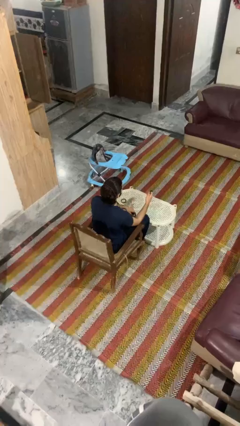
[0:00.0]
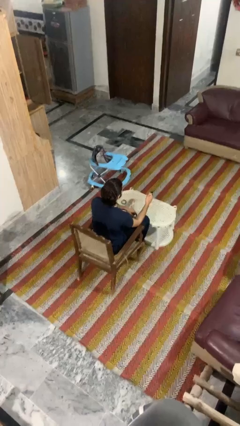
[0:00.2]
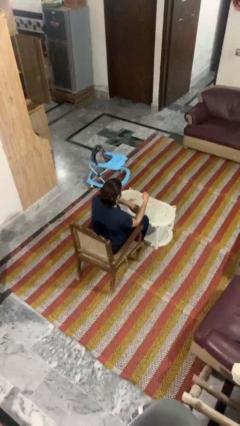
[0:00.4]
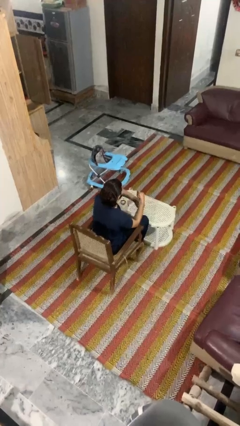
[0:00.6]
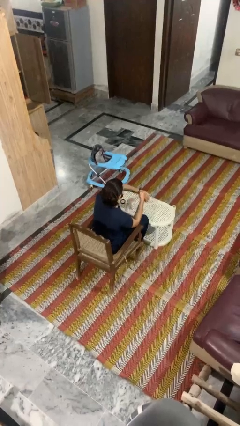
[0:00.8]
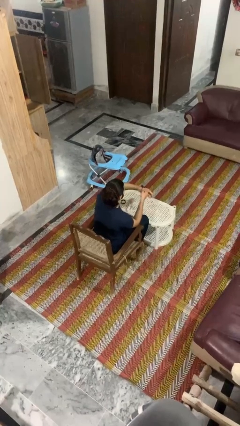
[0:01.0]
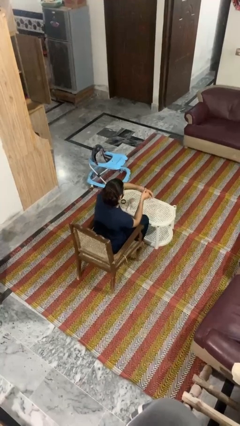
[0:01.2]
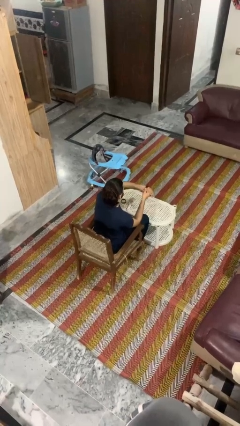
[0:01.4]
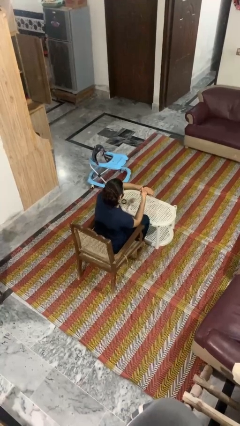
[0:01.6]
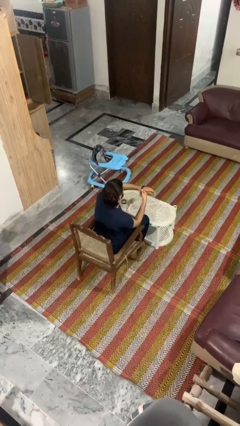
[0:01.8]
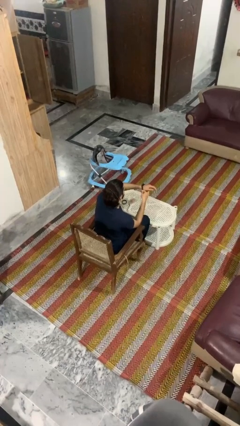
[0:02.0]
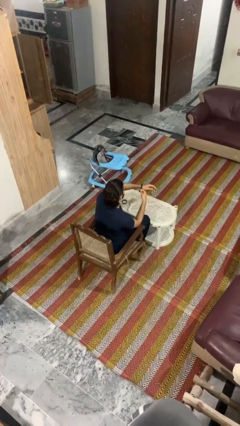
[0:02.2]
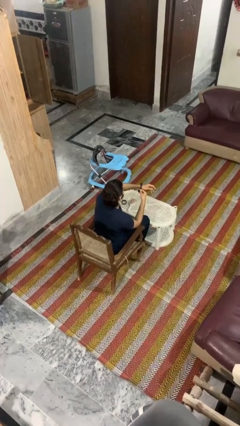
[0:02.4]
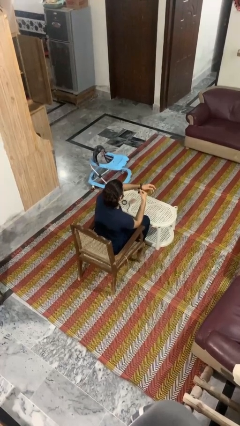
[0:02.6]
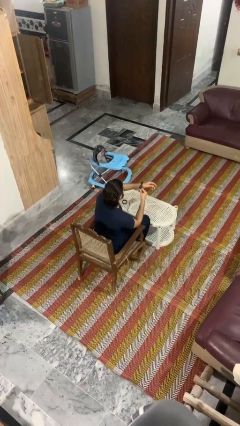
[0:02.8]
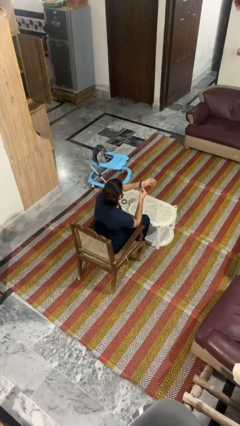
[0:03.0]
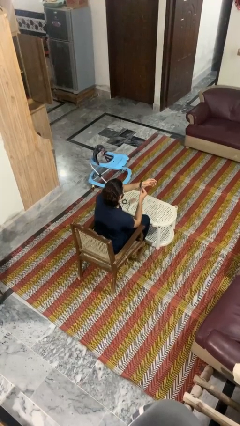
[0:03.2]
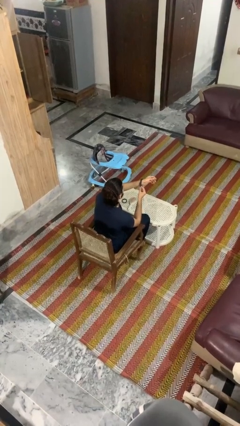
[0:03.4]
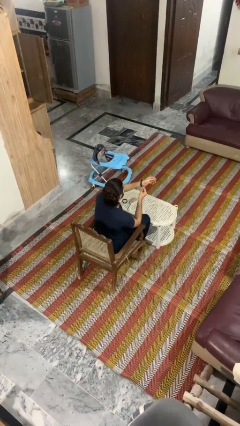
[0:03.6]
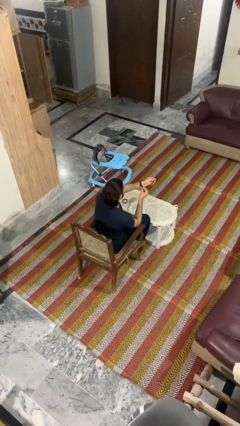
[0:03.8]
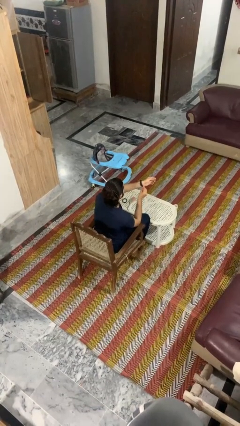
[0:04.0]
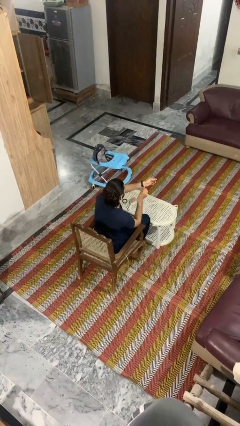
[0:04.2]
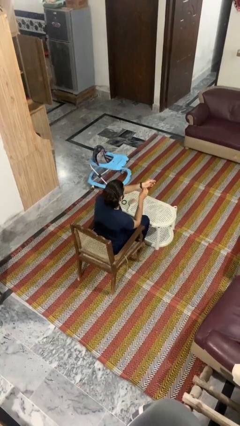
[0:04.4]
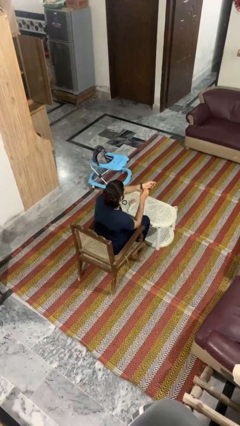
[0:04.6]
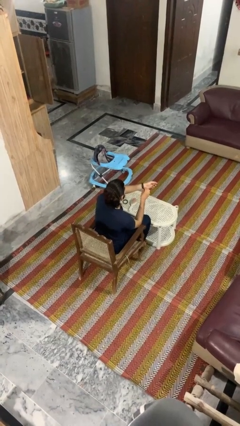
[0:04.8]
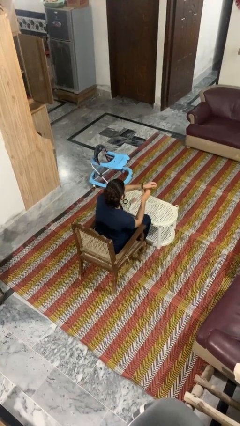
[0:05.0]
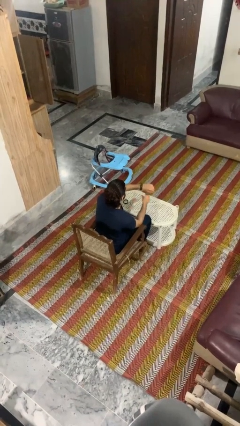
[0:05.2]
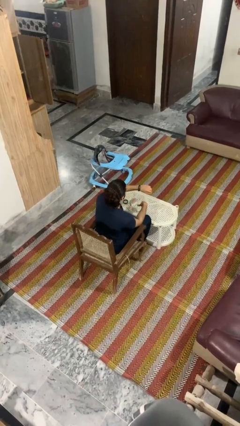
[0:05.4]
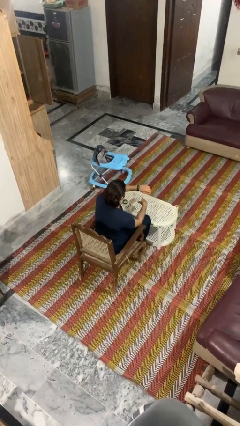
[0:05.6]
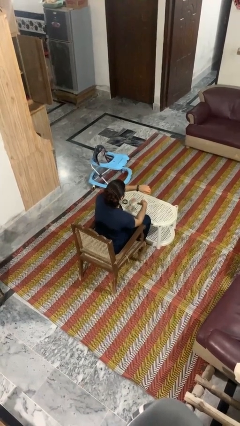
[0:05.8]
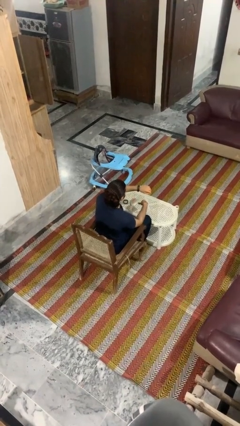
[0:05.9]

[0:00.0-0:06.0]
person puts on wristwatch

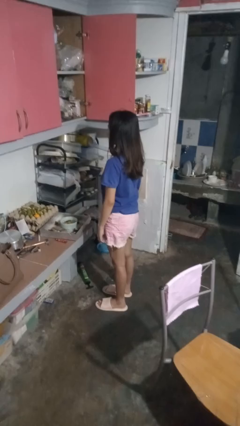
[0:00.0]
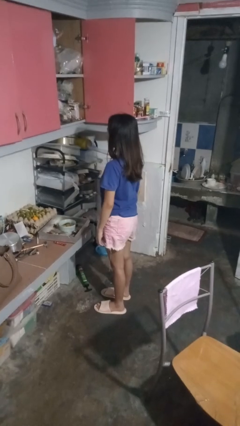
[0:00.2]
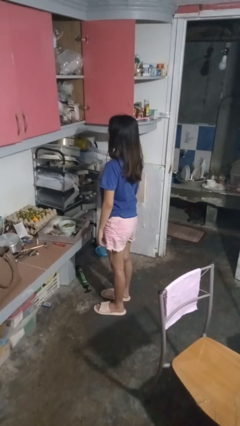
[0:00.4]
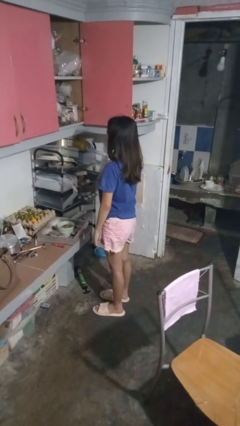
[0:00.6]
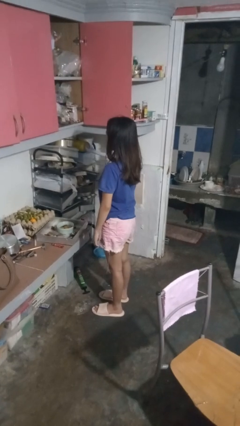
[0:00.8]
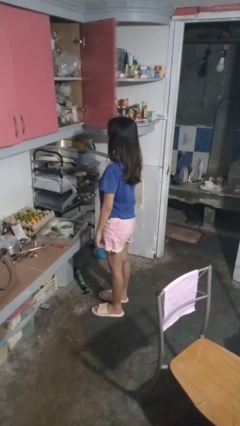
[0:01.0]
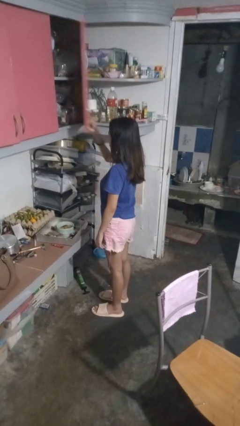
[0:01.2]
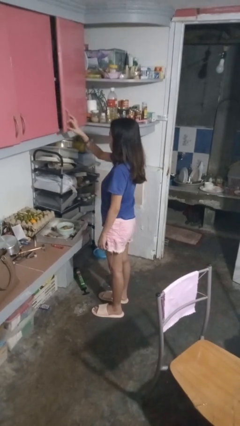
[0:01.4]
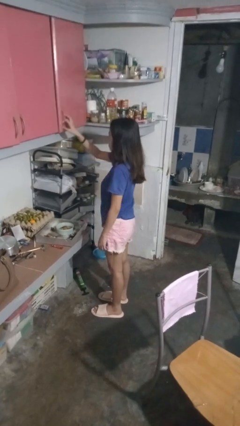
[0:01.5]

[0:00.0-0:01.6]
person closes cabinet

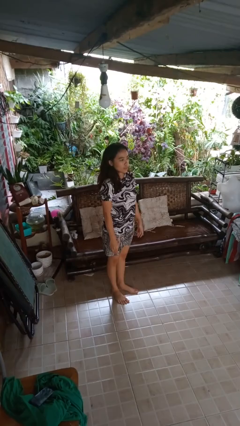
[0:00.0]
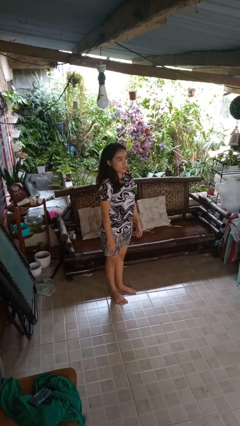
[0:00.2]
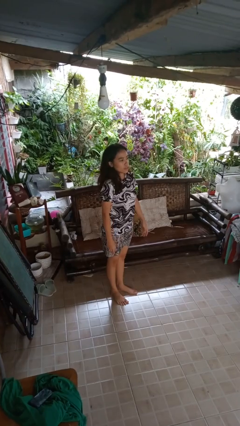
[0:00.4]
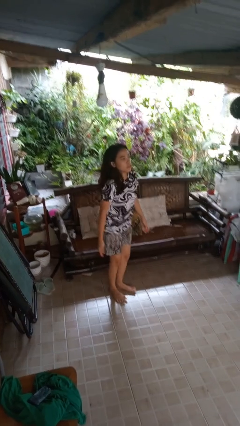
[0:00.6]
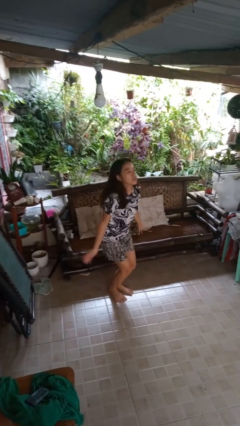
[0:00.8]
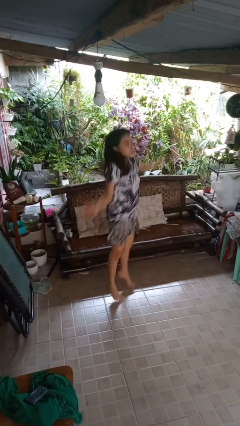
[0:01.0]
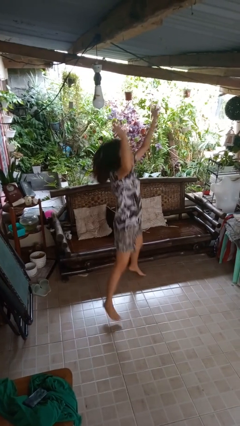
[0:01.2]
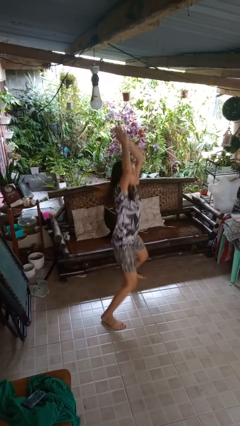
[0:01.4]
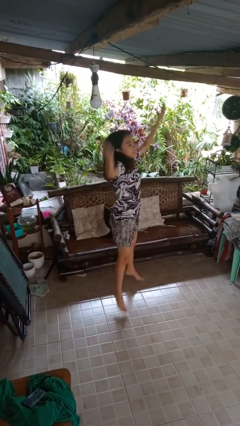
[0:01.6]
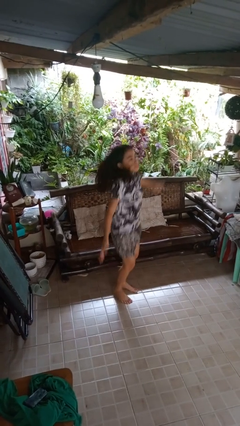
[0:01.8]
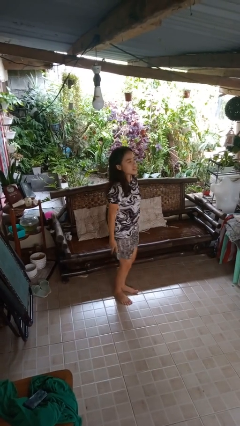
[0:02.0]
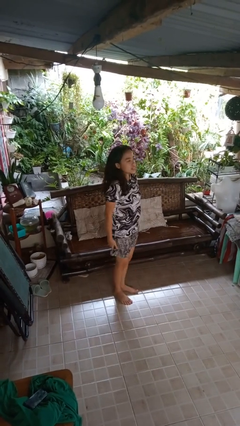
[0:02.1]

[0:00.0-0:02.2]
person exercises with jumping jacks

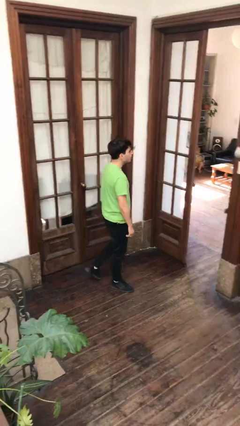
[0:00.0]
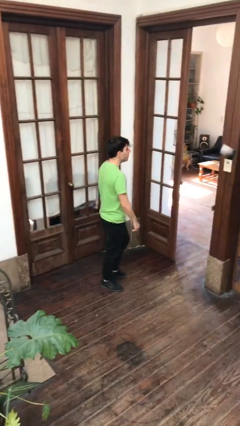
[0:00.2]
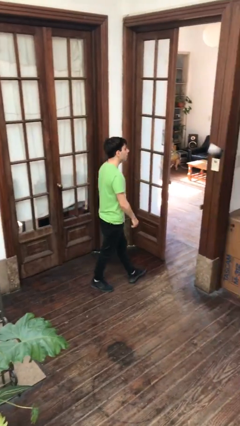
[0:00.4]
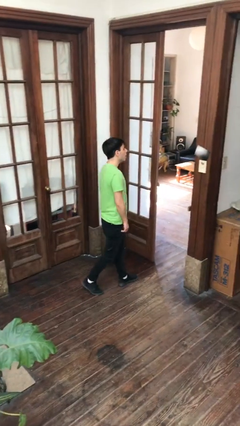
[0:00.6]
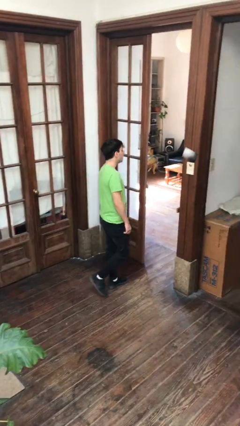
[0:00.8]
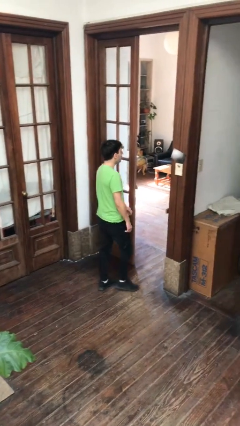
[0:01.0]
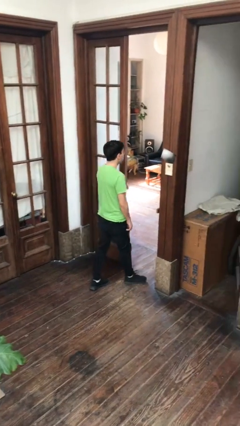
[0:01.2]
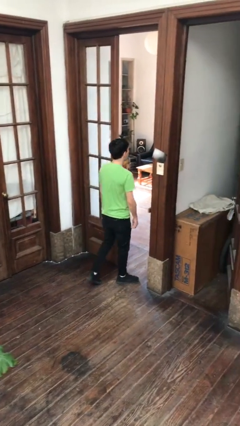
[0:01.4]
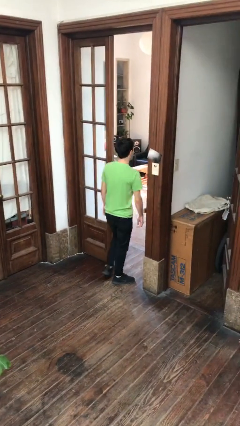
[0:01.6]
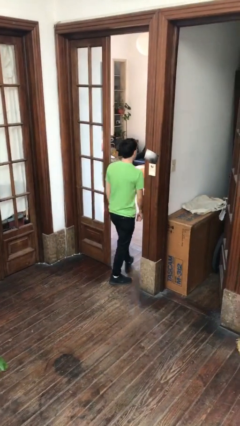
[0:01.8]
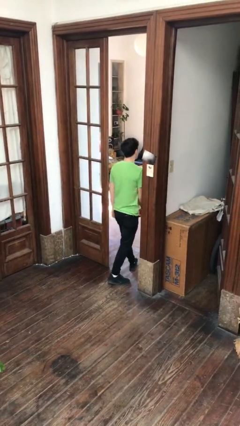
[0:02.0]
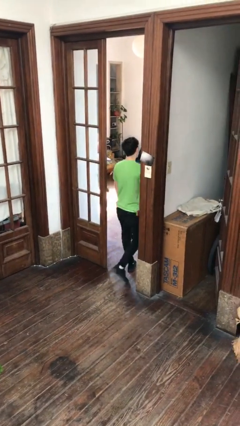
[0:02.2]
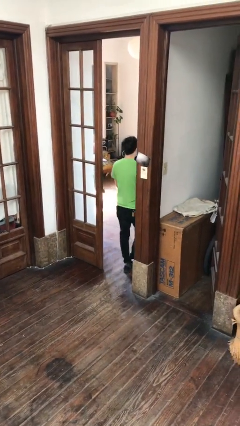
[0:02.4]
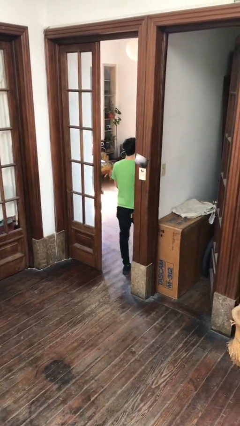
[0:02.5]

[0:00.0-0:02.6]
person exits scene through structure

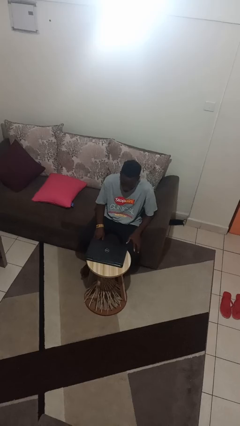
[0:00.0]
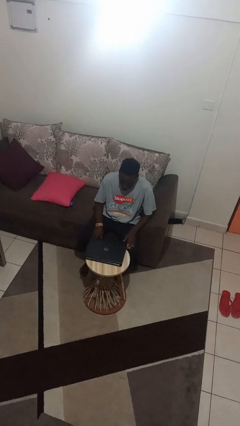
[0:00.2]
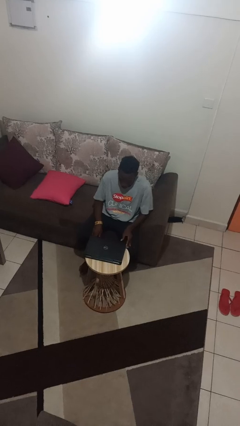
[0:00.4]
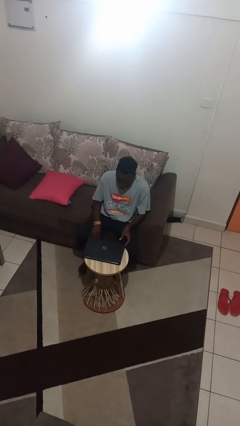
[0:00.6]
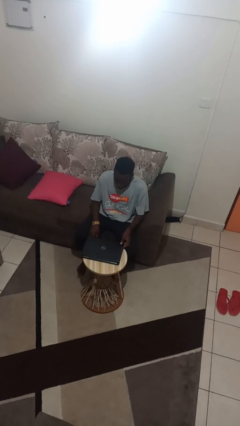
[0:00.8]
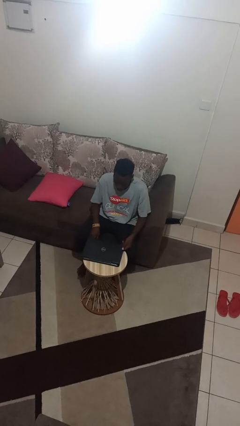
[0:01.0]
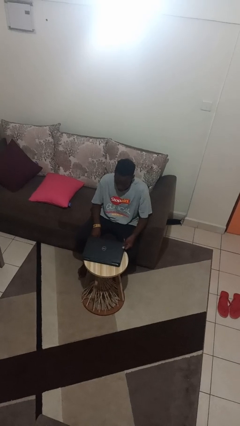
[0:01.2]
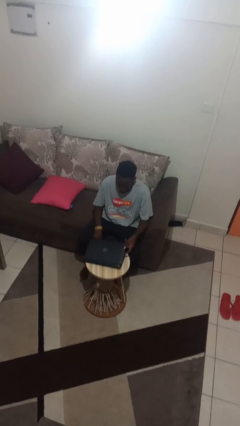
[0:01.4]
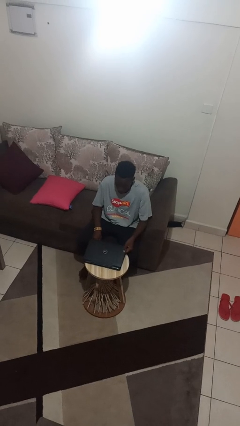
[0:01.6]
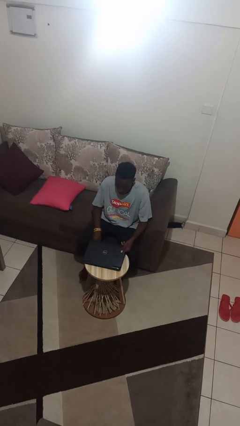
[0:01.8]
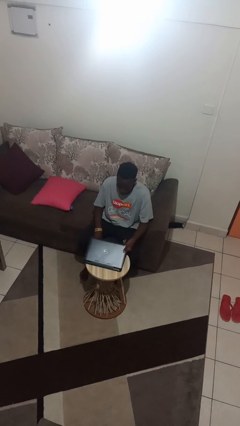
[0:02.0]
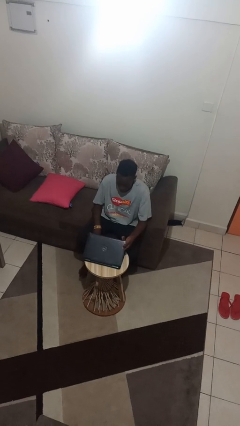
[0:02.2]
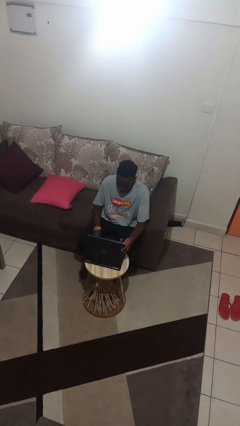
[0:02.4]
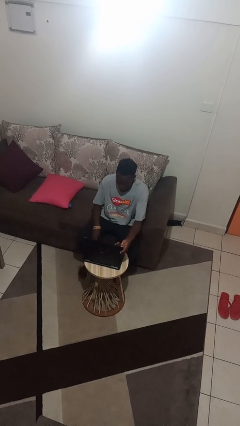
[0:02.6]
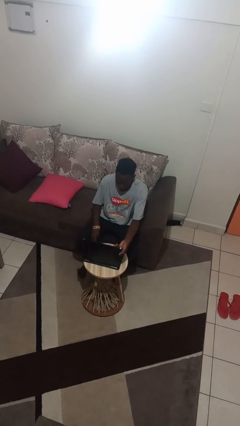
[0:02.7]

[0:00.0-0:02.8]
person opens laptop

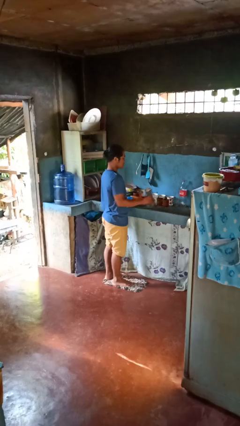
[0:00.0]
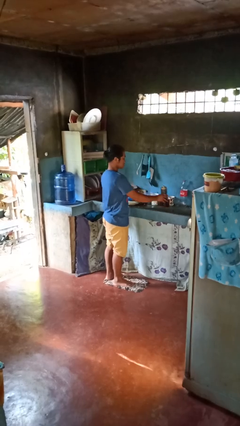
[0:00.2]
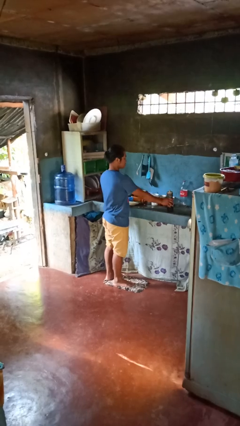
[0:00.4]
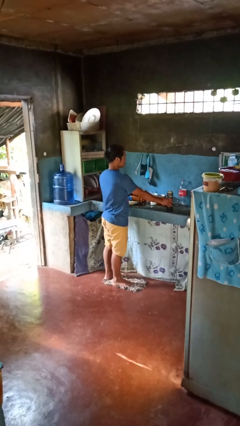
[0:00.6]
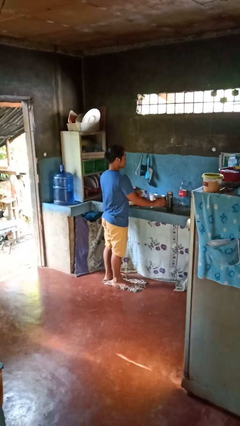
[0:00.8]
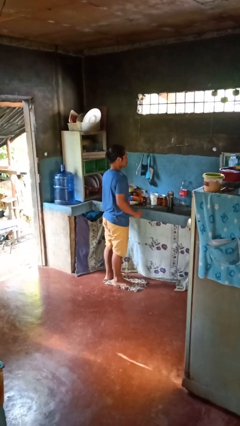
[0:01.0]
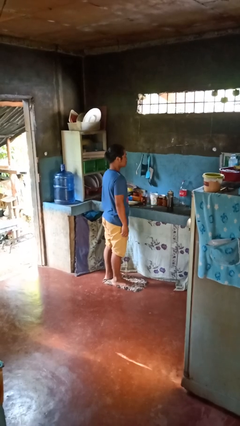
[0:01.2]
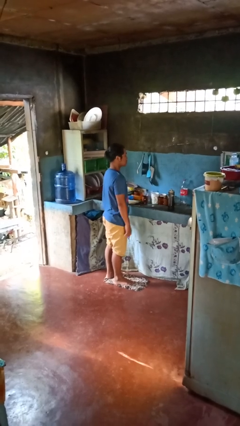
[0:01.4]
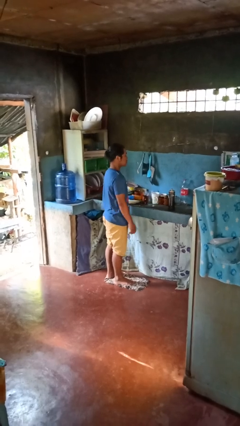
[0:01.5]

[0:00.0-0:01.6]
person puts down object on countertop

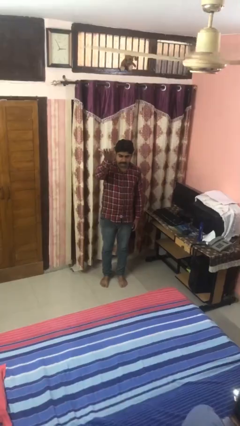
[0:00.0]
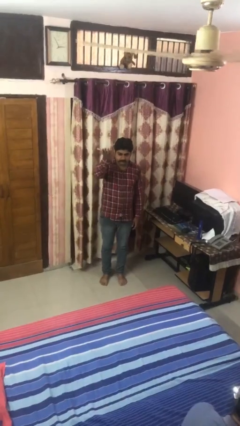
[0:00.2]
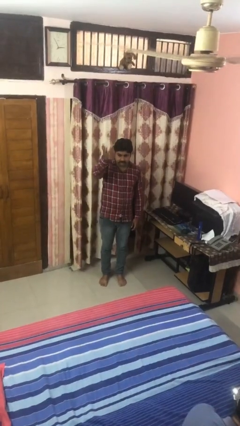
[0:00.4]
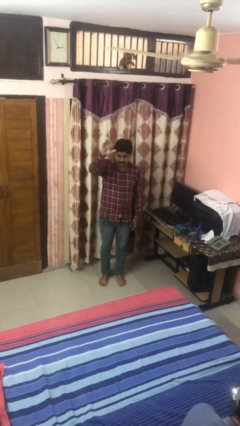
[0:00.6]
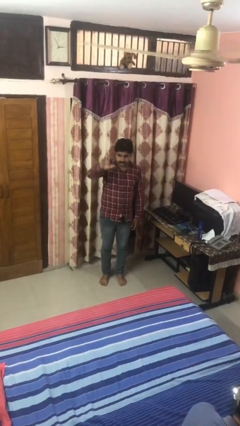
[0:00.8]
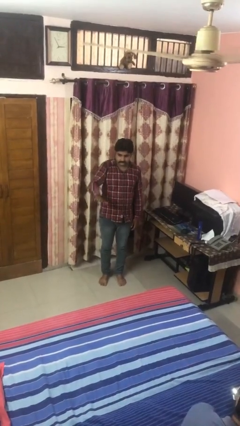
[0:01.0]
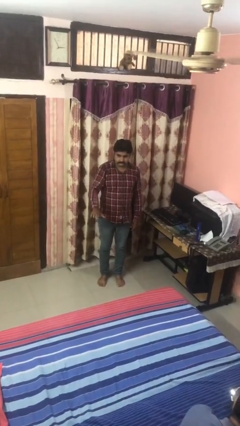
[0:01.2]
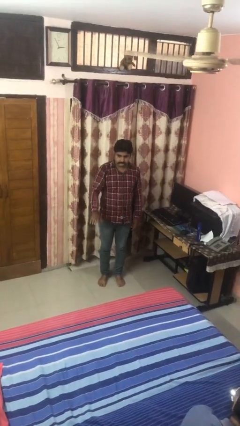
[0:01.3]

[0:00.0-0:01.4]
person gestures swipe down
